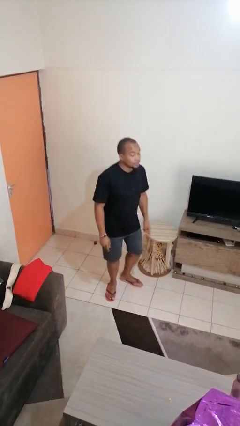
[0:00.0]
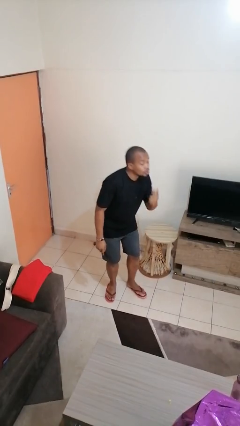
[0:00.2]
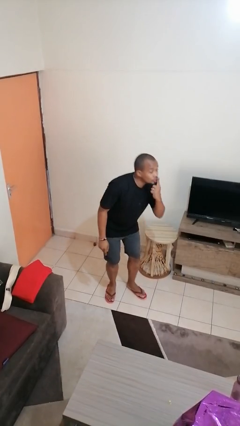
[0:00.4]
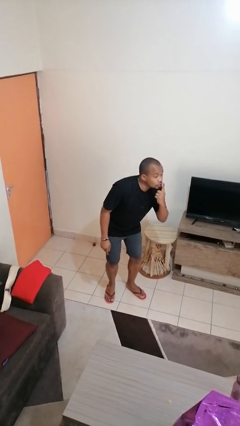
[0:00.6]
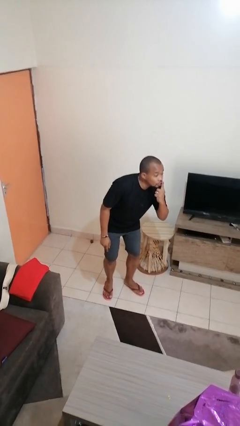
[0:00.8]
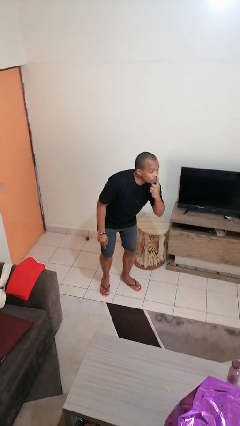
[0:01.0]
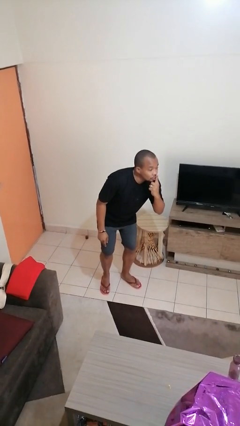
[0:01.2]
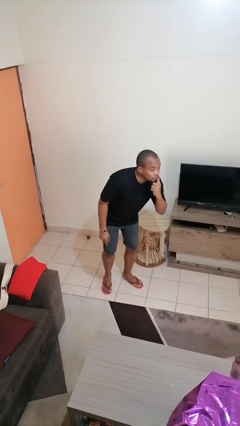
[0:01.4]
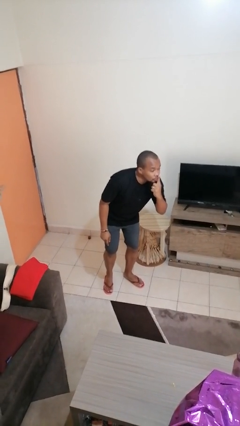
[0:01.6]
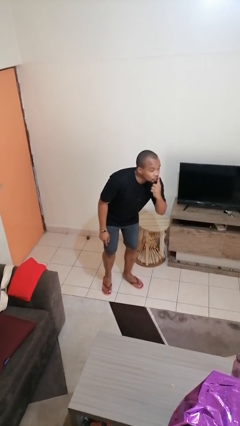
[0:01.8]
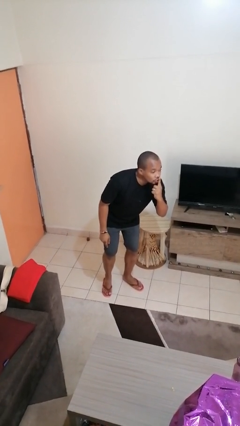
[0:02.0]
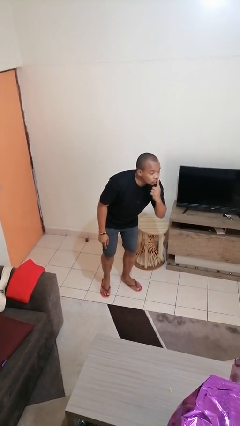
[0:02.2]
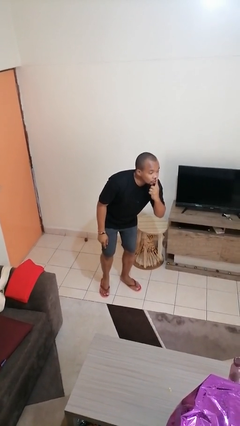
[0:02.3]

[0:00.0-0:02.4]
person gestures be quiet

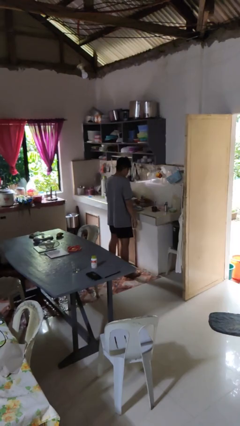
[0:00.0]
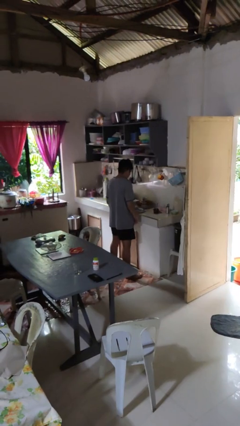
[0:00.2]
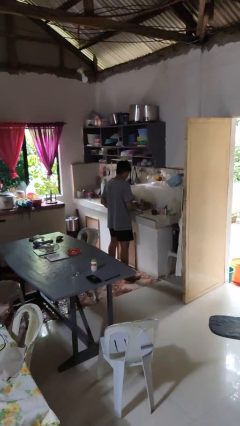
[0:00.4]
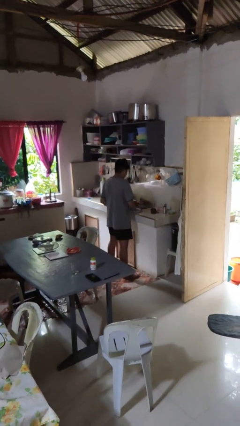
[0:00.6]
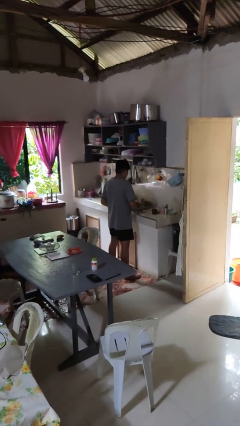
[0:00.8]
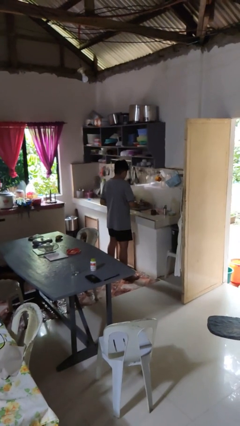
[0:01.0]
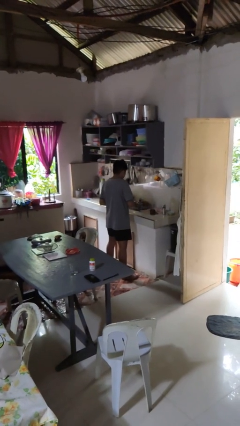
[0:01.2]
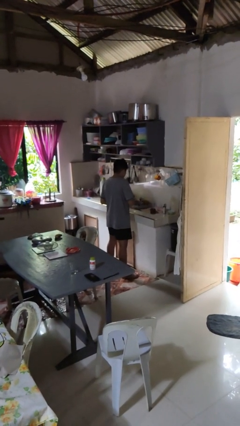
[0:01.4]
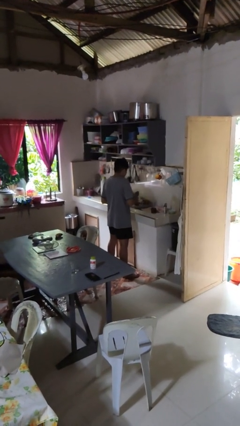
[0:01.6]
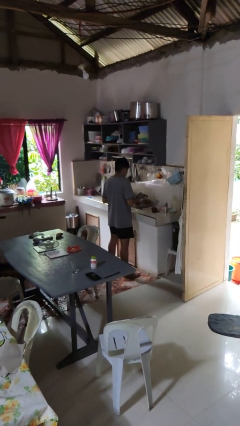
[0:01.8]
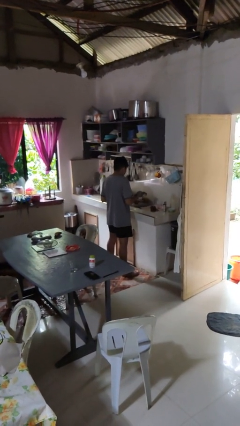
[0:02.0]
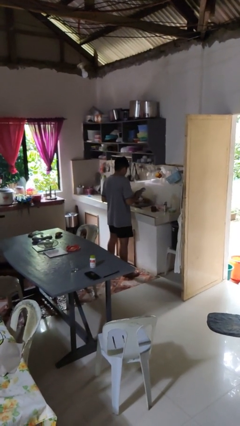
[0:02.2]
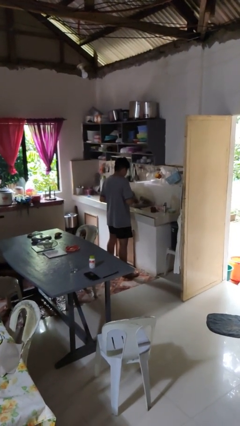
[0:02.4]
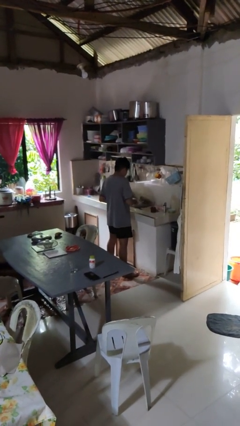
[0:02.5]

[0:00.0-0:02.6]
person dries dish

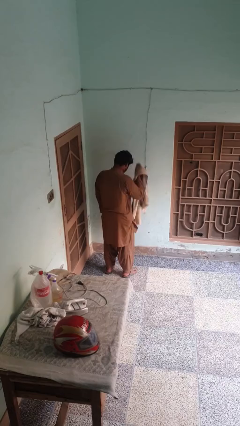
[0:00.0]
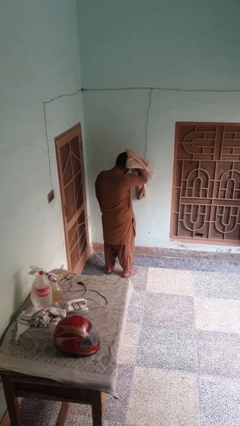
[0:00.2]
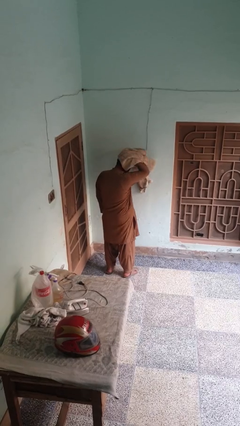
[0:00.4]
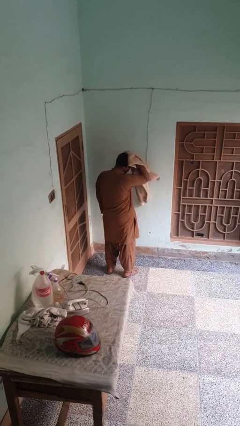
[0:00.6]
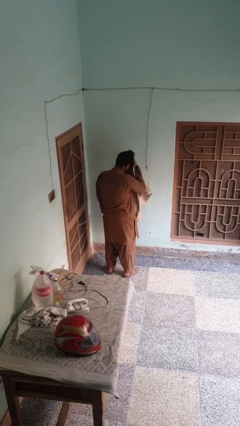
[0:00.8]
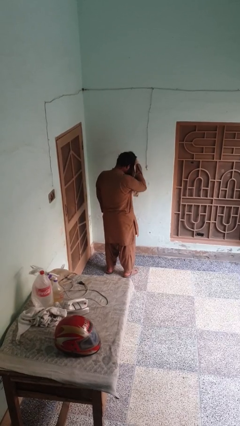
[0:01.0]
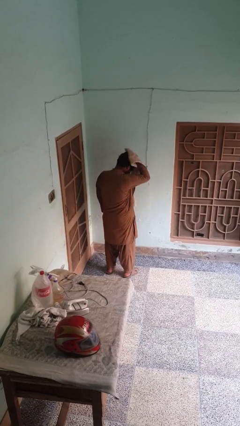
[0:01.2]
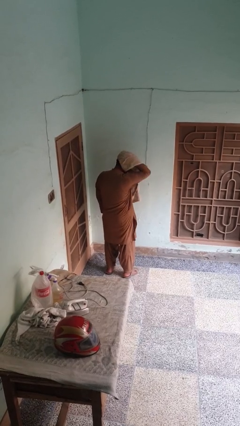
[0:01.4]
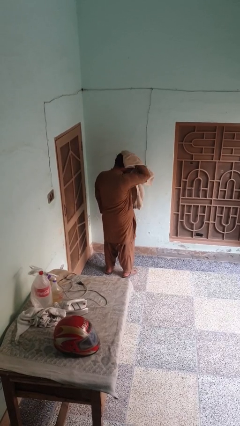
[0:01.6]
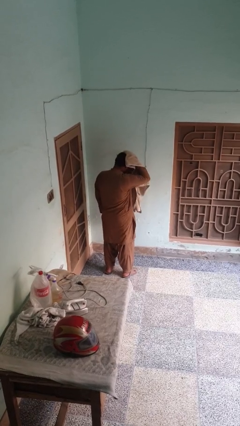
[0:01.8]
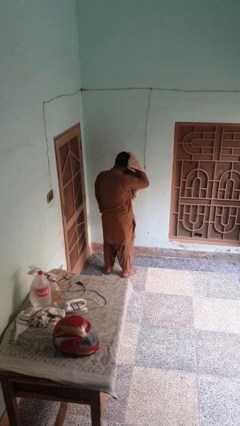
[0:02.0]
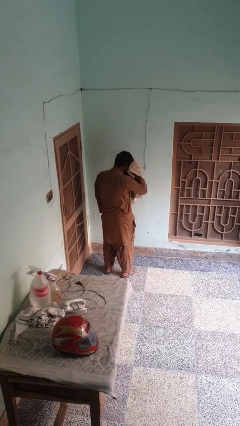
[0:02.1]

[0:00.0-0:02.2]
person dries hair with towel

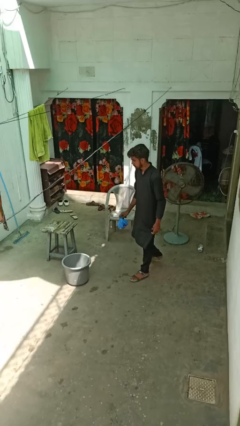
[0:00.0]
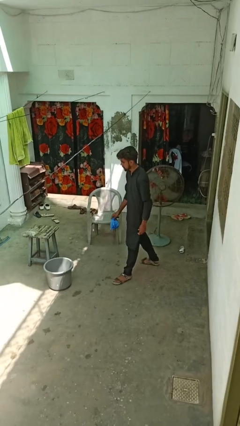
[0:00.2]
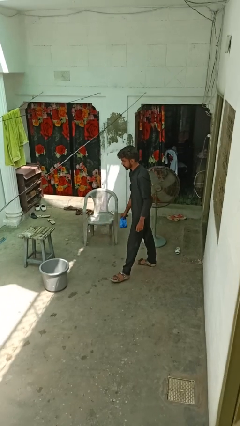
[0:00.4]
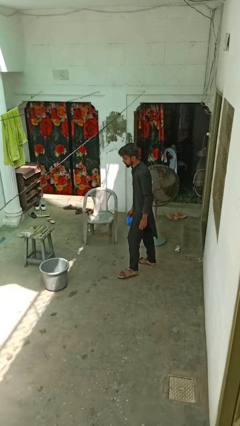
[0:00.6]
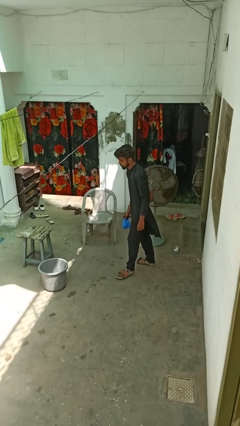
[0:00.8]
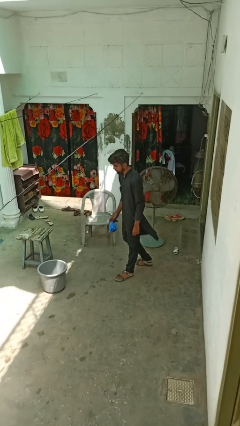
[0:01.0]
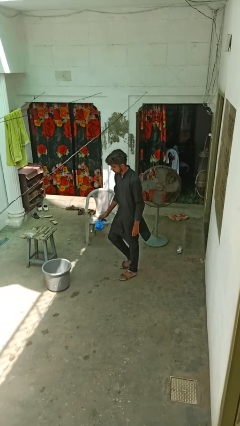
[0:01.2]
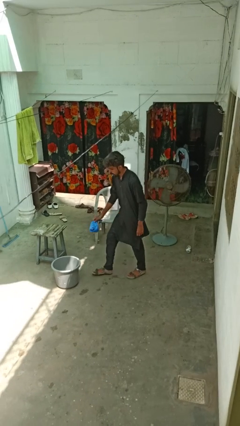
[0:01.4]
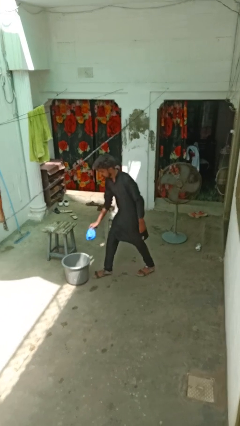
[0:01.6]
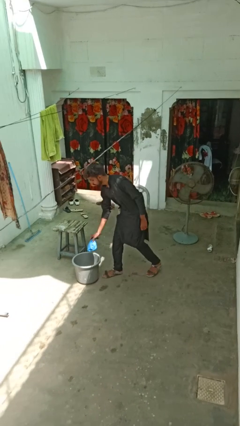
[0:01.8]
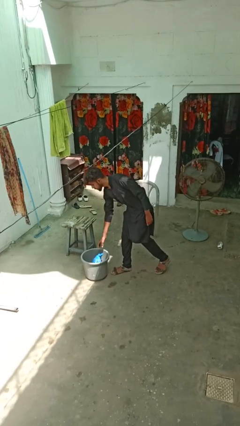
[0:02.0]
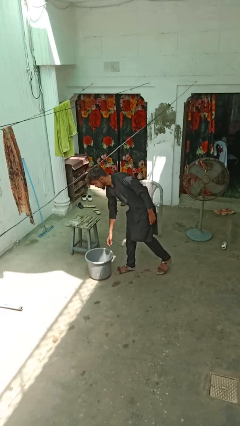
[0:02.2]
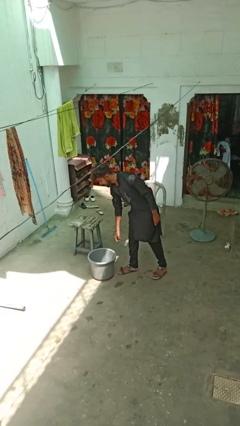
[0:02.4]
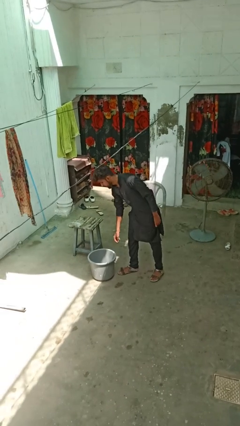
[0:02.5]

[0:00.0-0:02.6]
person discards trash

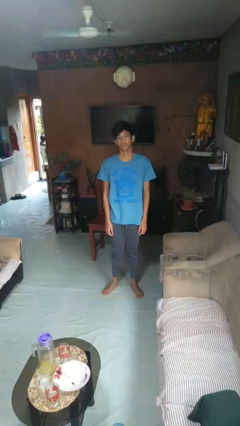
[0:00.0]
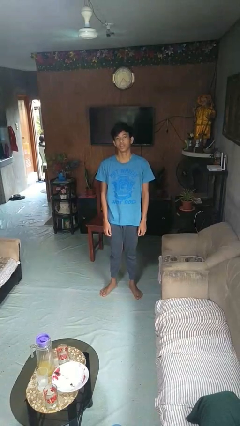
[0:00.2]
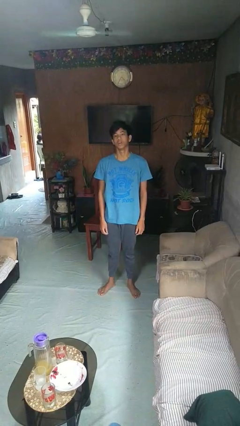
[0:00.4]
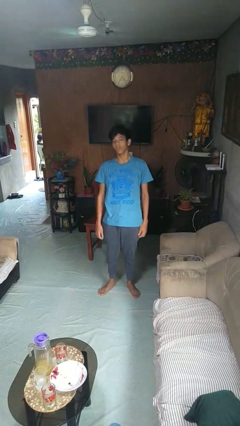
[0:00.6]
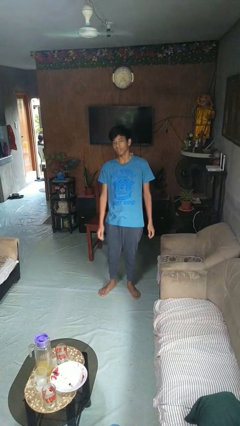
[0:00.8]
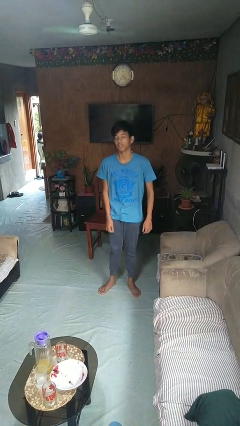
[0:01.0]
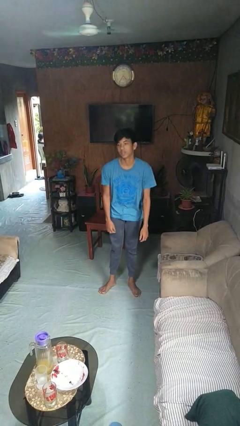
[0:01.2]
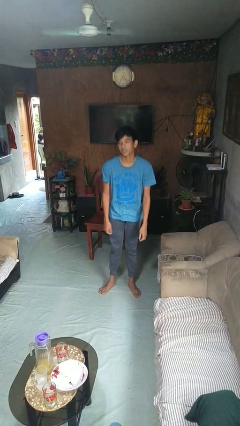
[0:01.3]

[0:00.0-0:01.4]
person dances in place

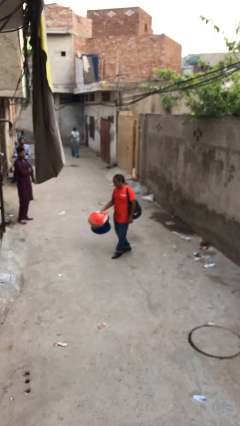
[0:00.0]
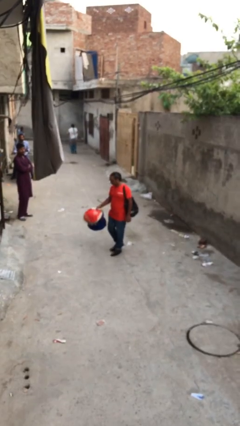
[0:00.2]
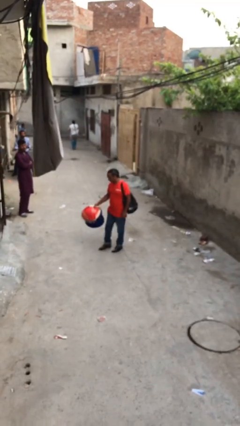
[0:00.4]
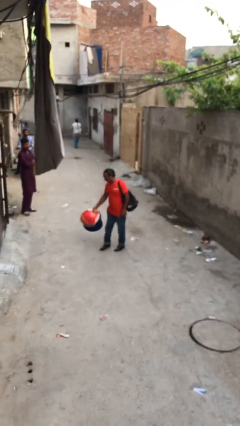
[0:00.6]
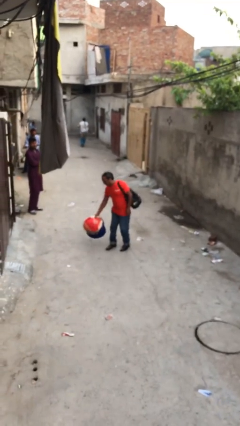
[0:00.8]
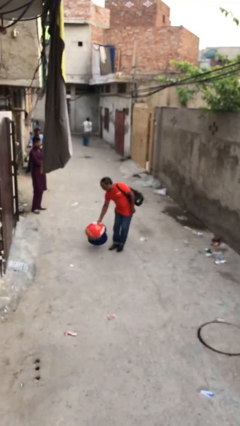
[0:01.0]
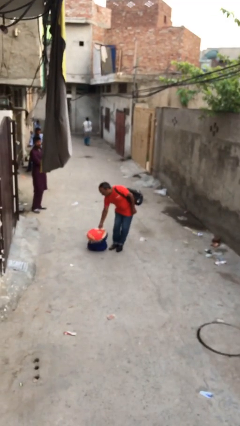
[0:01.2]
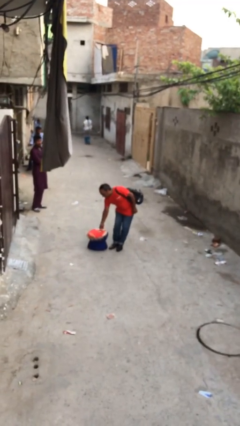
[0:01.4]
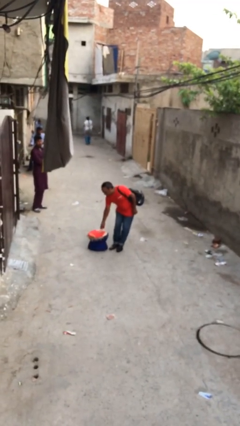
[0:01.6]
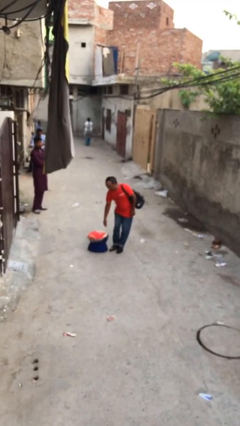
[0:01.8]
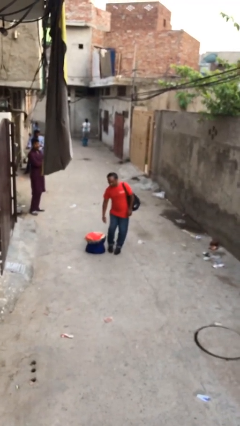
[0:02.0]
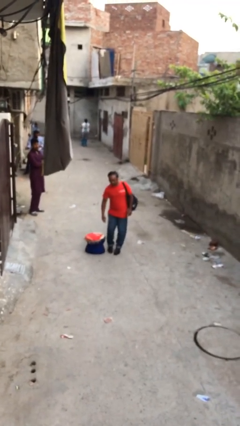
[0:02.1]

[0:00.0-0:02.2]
person puts down object on floor

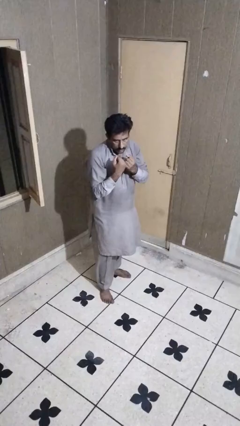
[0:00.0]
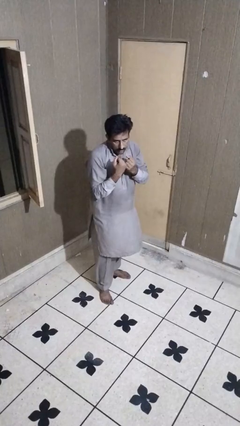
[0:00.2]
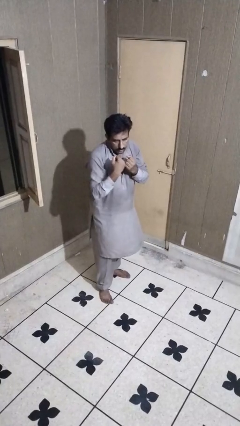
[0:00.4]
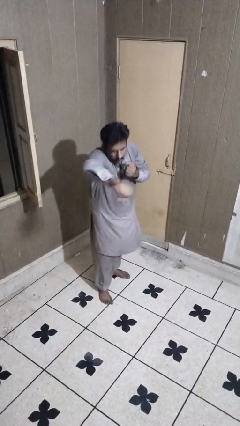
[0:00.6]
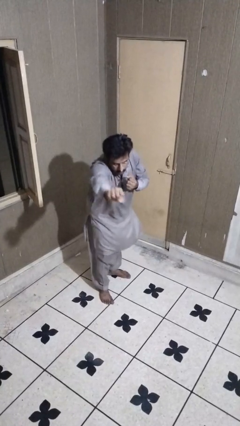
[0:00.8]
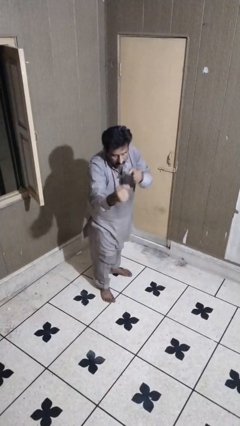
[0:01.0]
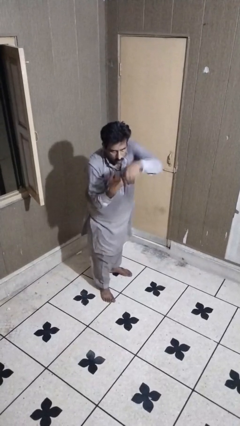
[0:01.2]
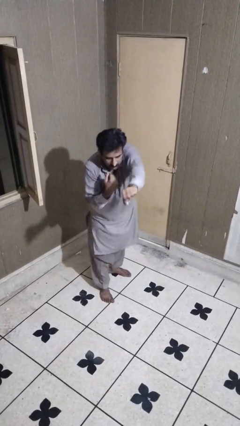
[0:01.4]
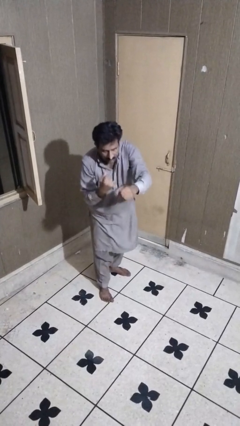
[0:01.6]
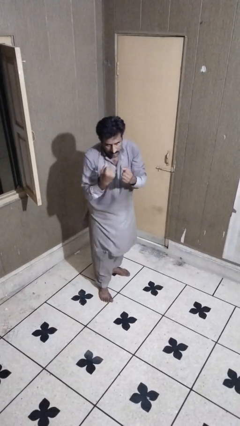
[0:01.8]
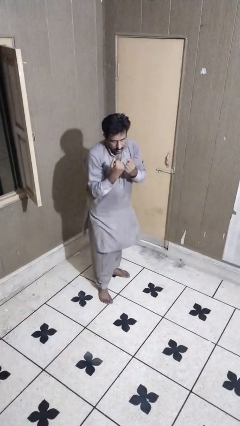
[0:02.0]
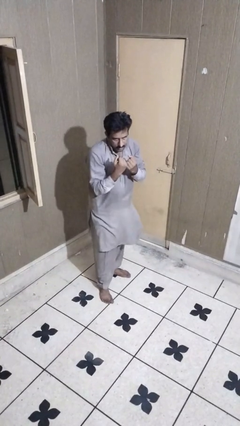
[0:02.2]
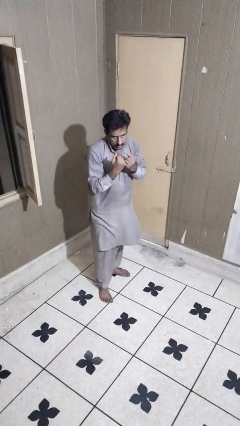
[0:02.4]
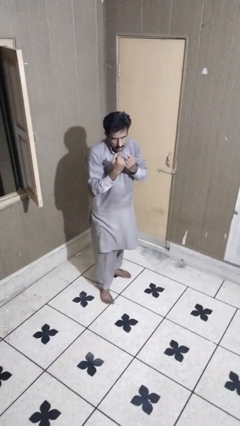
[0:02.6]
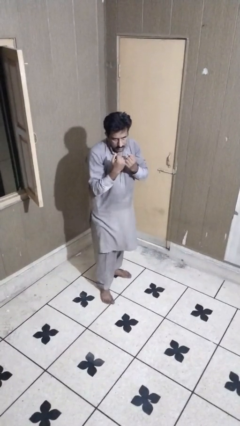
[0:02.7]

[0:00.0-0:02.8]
person punches

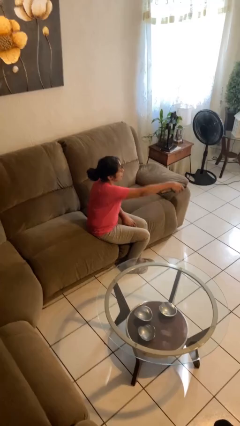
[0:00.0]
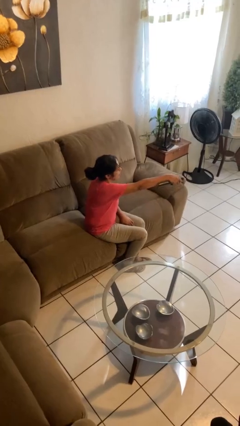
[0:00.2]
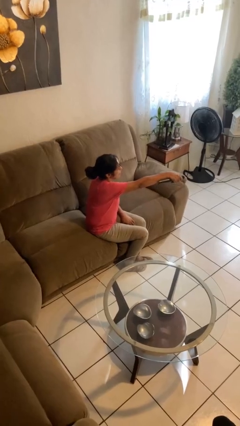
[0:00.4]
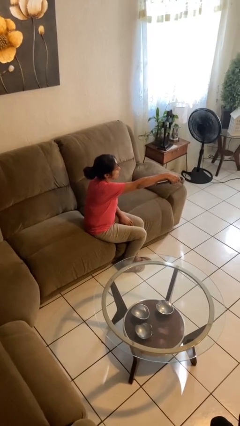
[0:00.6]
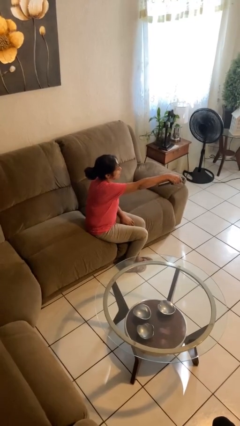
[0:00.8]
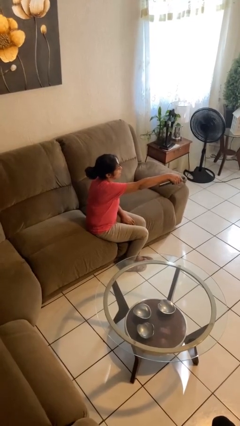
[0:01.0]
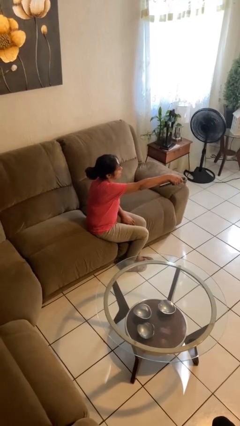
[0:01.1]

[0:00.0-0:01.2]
person uses television remote
